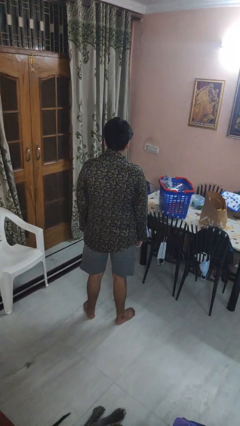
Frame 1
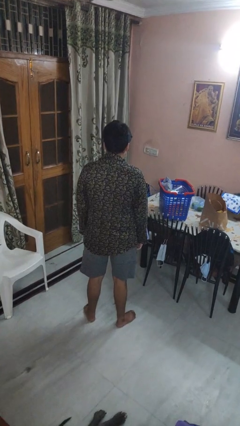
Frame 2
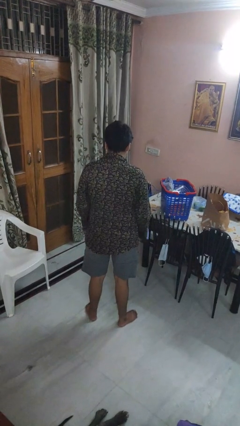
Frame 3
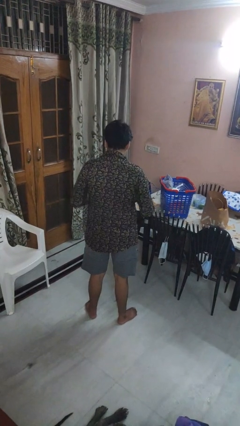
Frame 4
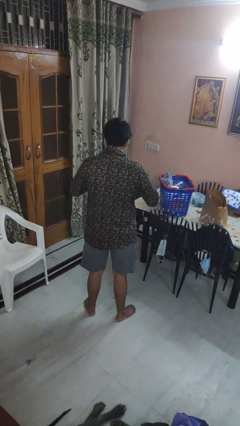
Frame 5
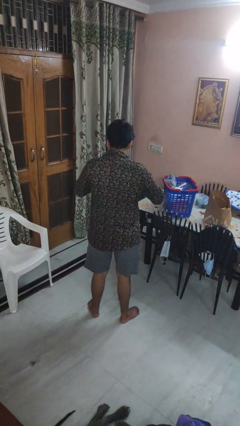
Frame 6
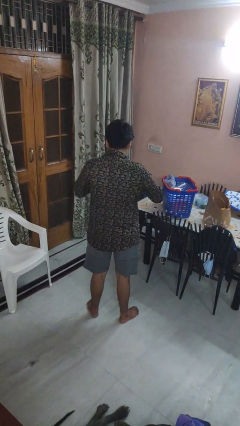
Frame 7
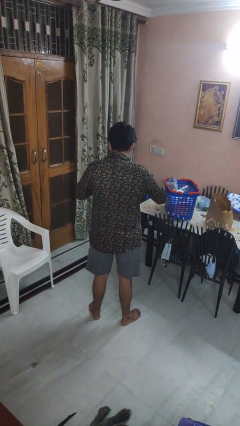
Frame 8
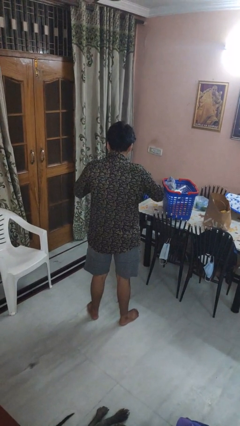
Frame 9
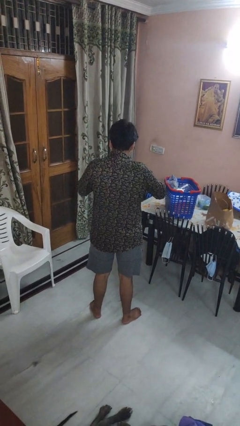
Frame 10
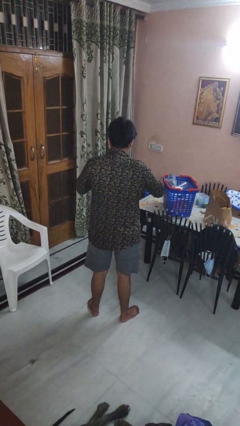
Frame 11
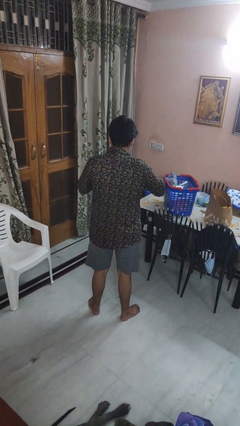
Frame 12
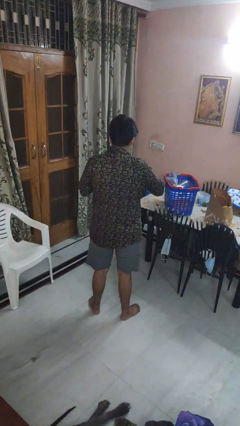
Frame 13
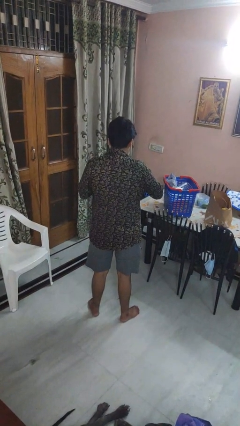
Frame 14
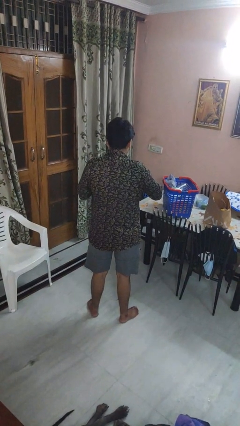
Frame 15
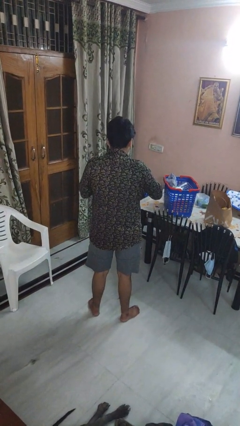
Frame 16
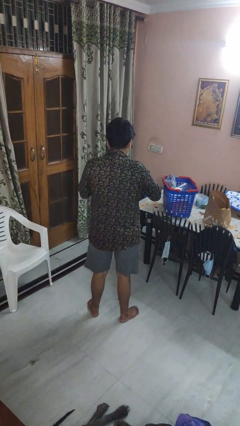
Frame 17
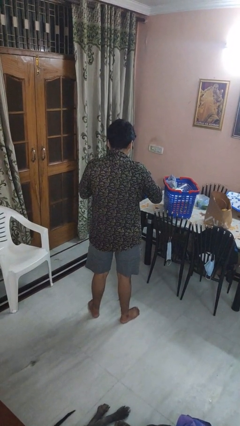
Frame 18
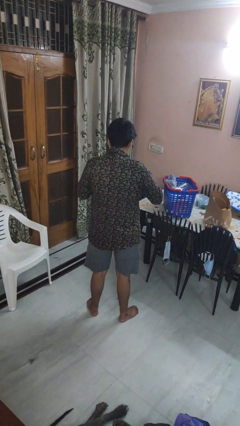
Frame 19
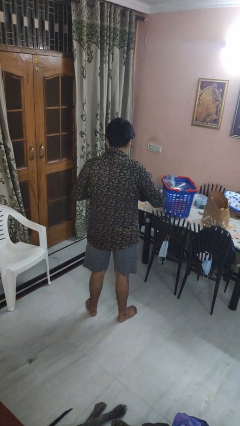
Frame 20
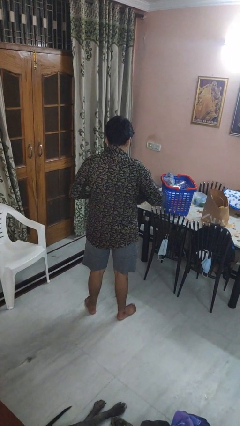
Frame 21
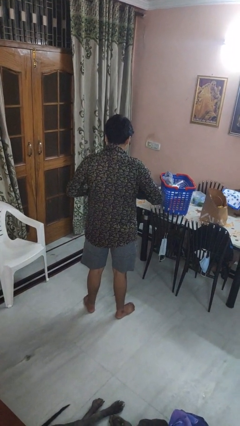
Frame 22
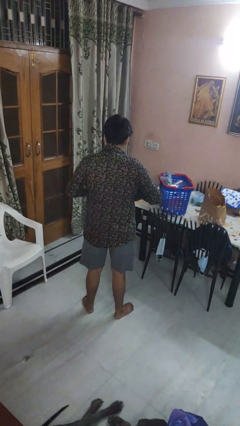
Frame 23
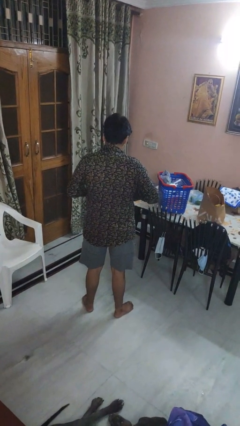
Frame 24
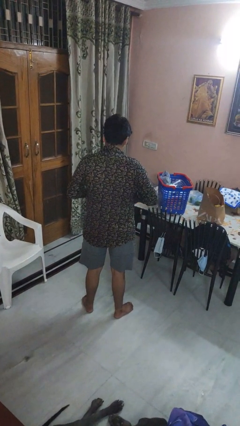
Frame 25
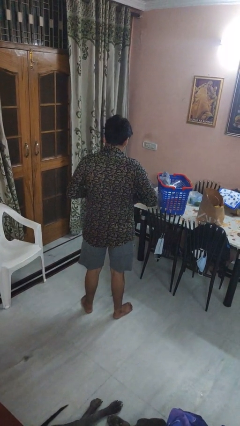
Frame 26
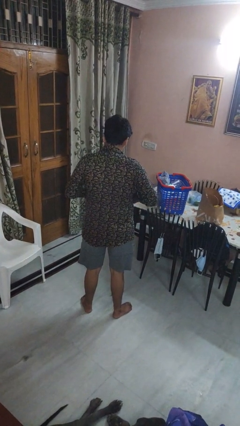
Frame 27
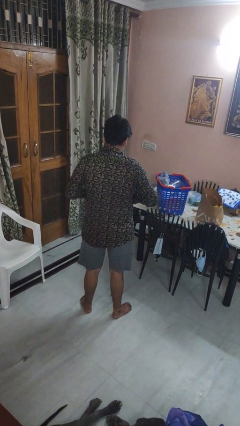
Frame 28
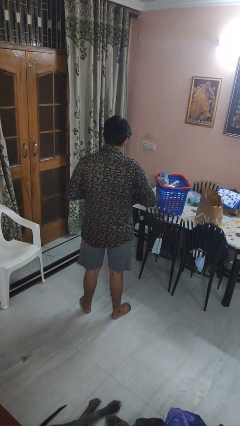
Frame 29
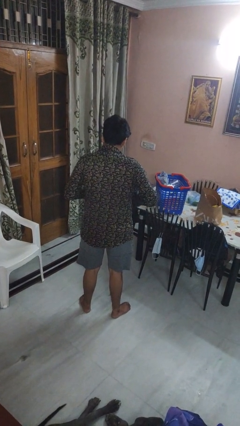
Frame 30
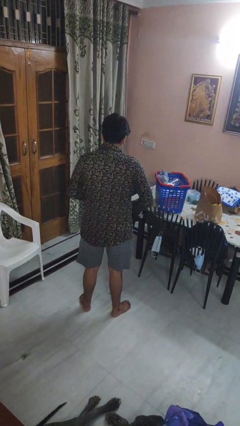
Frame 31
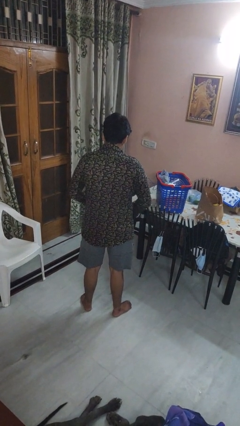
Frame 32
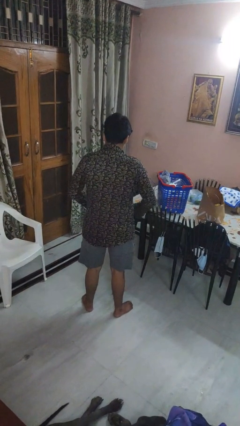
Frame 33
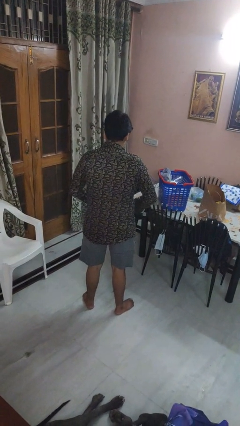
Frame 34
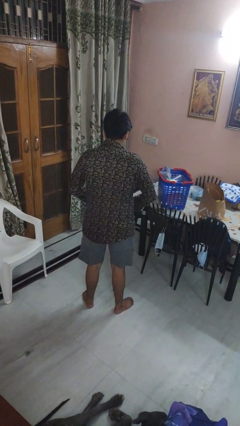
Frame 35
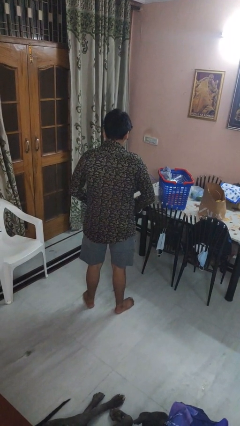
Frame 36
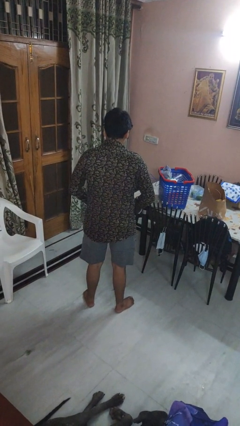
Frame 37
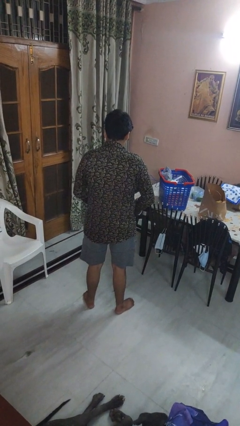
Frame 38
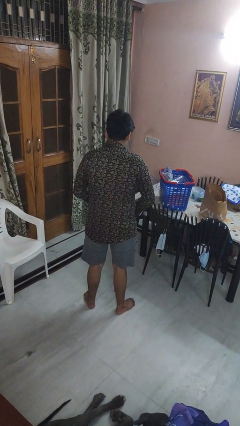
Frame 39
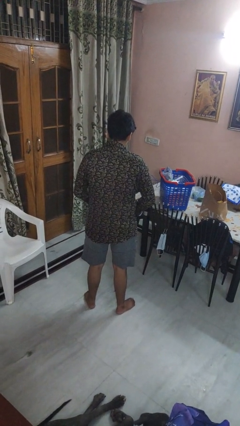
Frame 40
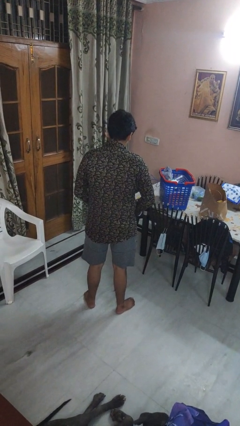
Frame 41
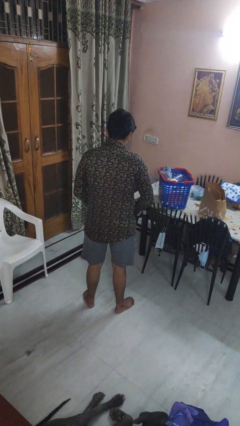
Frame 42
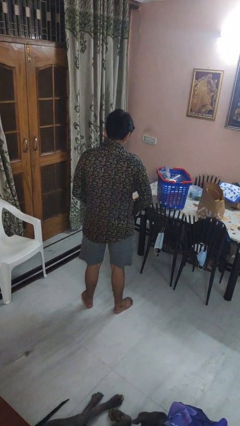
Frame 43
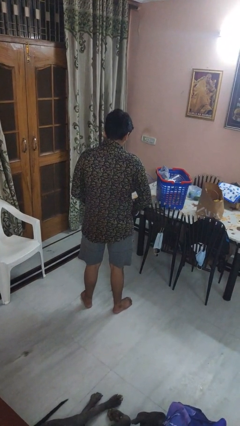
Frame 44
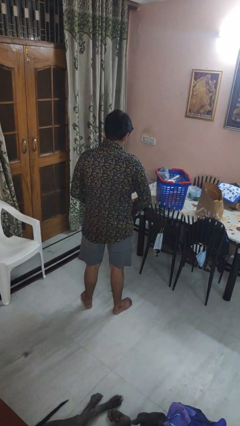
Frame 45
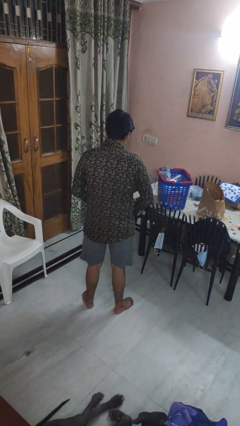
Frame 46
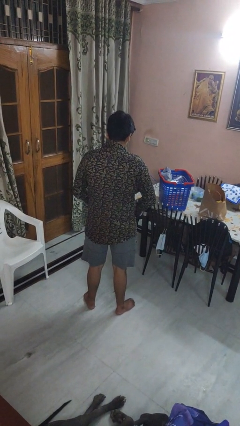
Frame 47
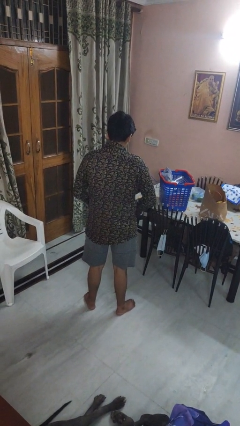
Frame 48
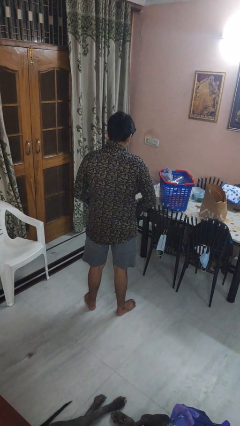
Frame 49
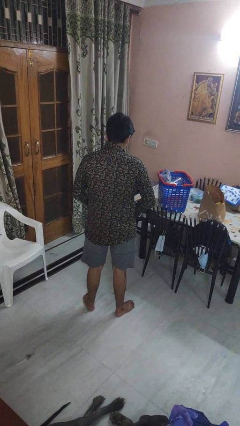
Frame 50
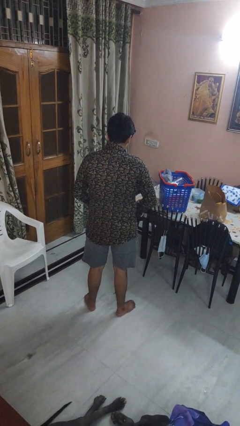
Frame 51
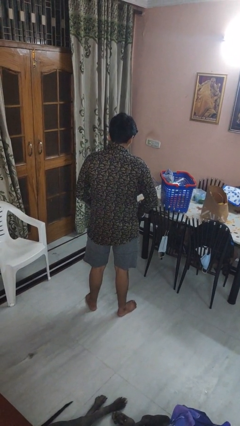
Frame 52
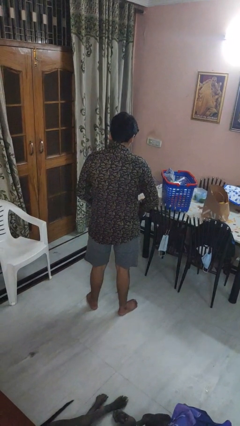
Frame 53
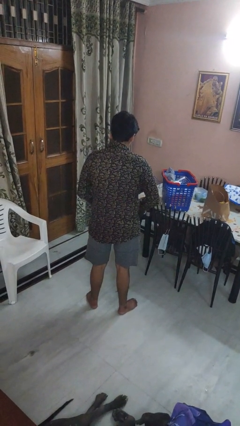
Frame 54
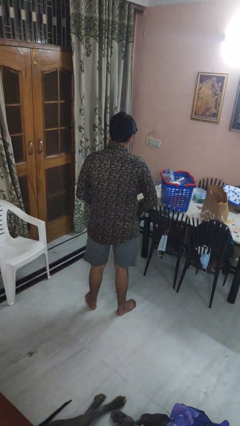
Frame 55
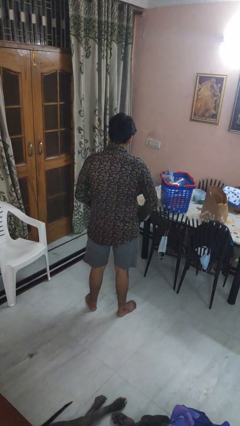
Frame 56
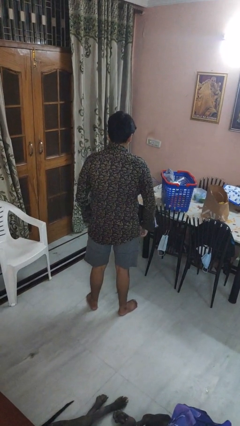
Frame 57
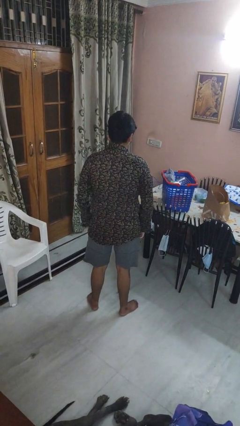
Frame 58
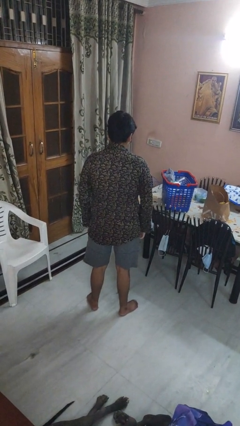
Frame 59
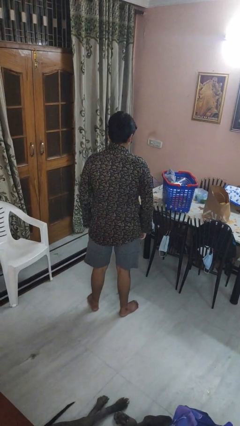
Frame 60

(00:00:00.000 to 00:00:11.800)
person buttons shirt

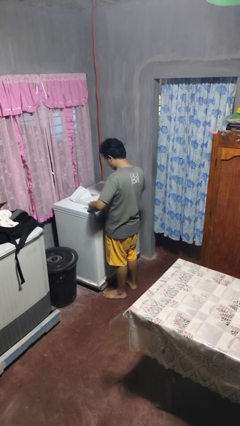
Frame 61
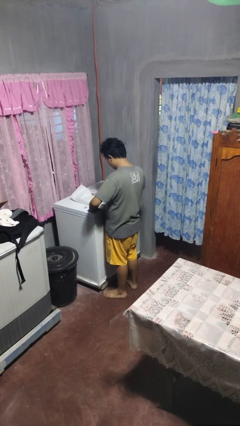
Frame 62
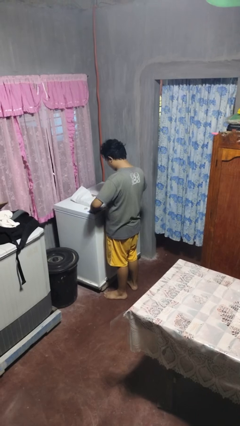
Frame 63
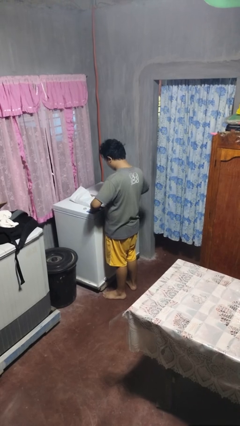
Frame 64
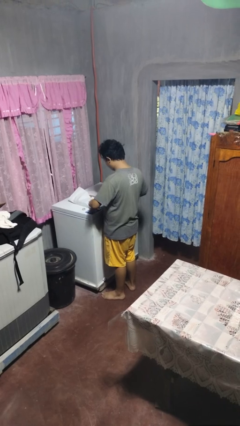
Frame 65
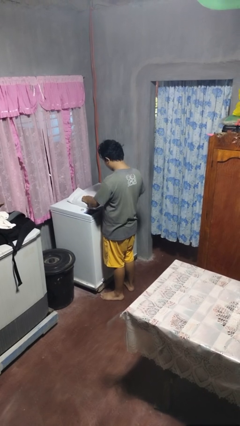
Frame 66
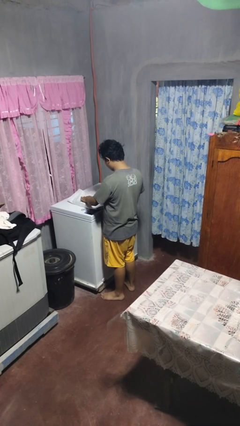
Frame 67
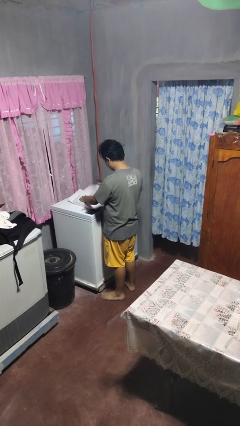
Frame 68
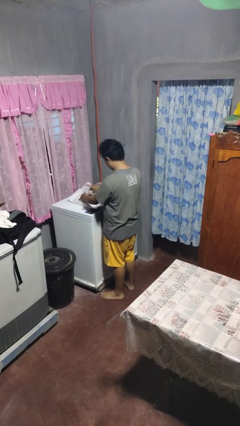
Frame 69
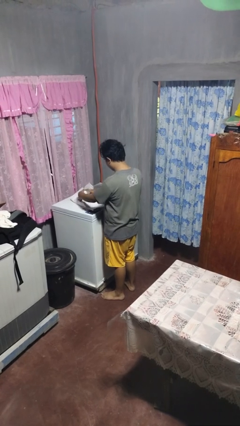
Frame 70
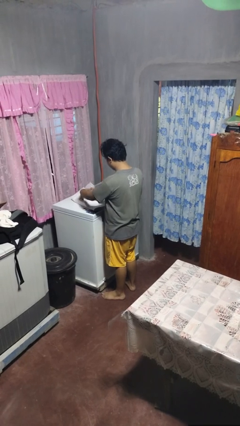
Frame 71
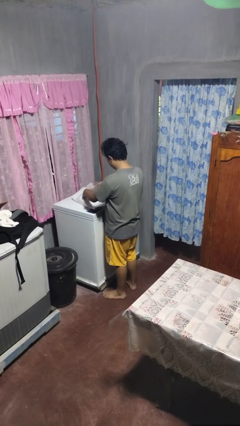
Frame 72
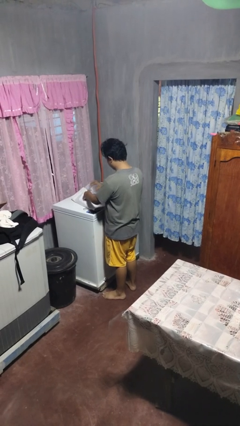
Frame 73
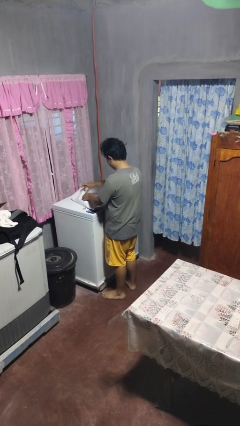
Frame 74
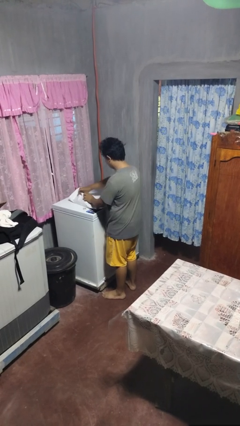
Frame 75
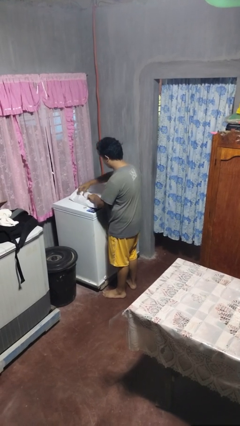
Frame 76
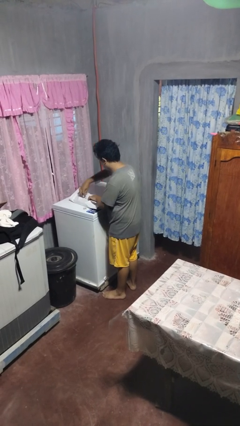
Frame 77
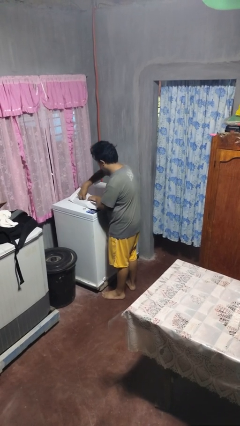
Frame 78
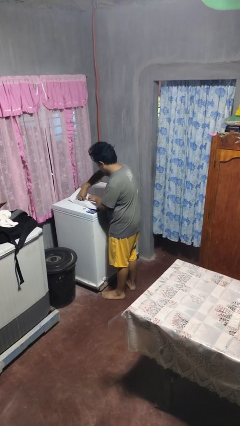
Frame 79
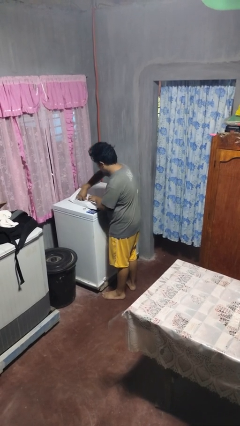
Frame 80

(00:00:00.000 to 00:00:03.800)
person wraps box

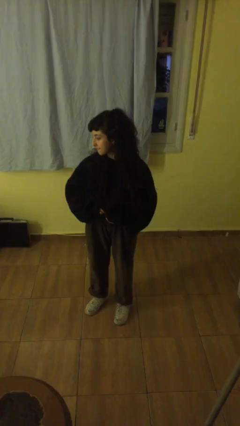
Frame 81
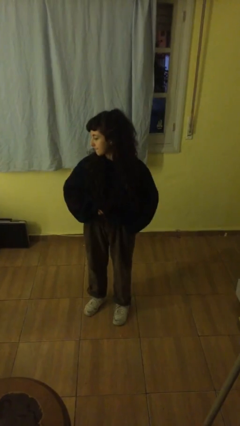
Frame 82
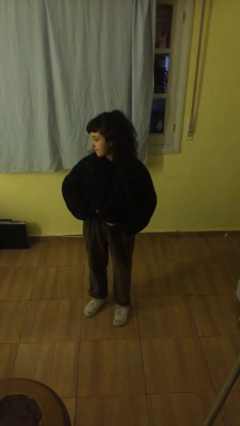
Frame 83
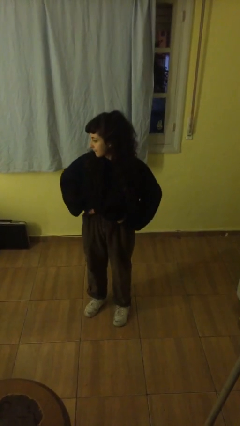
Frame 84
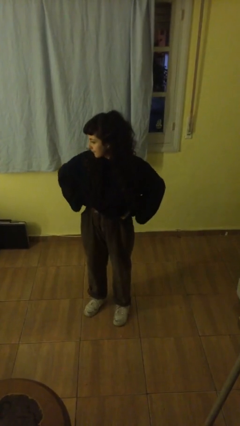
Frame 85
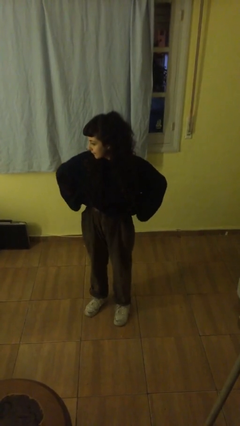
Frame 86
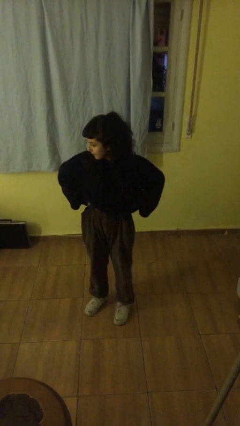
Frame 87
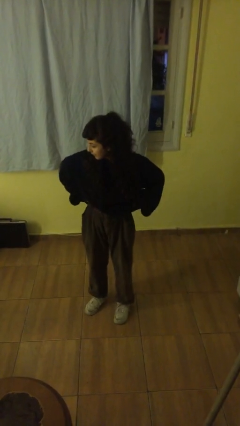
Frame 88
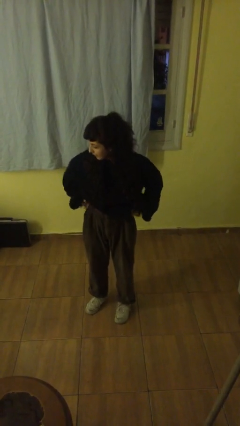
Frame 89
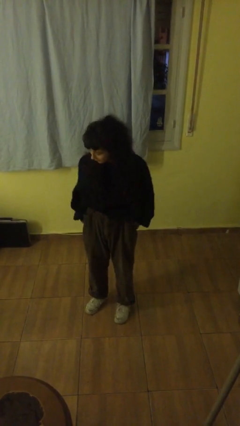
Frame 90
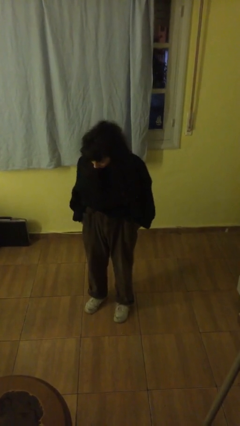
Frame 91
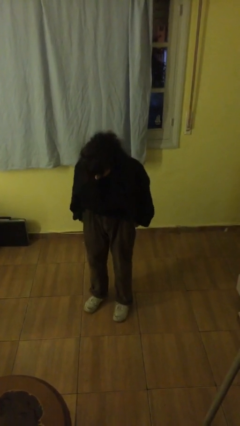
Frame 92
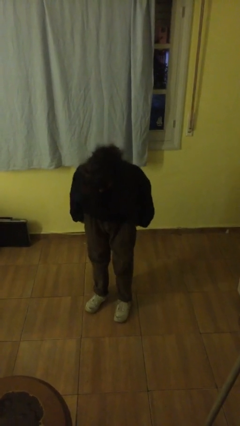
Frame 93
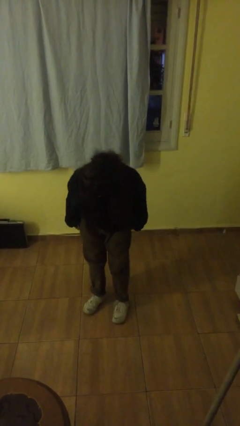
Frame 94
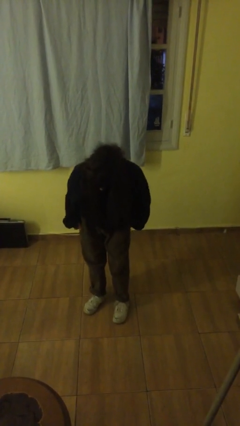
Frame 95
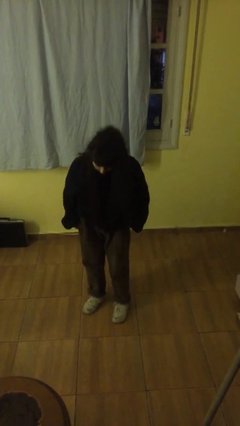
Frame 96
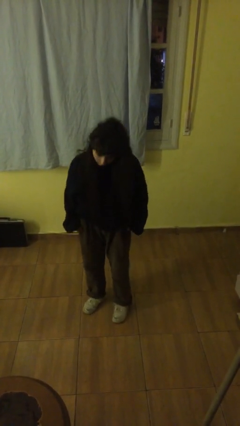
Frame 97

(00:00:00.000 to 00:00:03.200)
person hikes up pants
